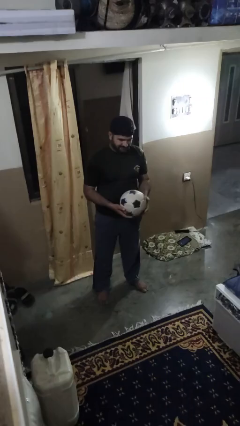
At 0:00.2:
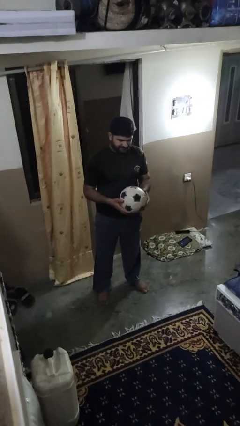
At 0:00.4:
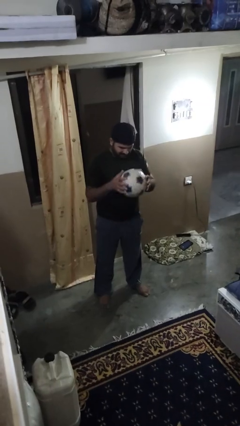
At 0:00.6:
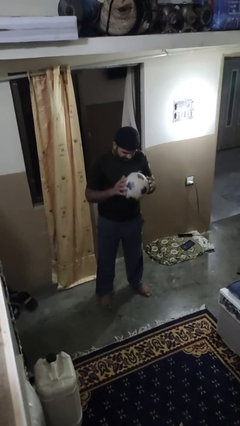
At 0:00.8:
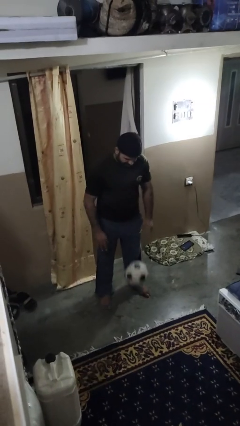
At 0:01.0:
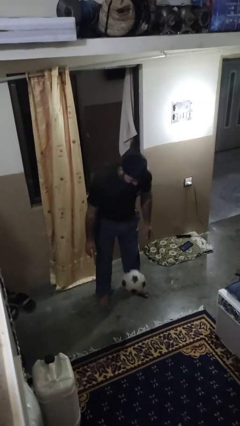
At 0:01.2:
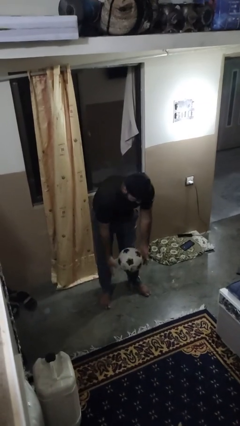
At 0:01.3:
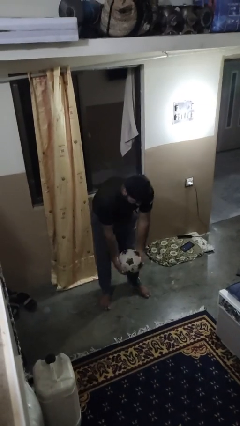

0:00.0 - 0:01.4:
person bounces ball on floor

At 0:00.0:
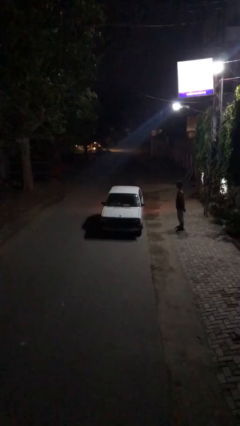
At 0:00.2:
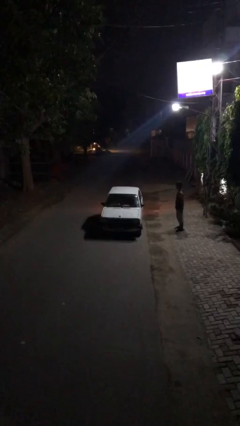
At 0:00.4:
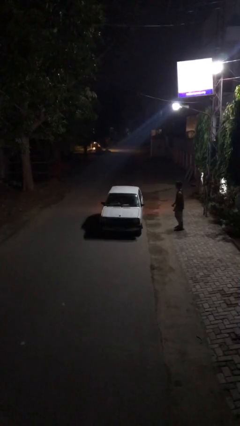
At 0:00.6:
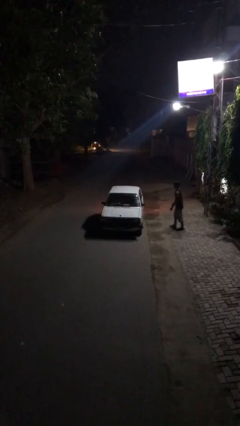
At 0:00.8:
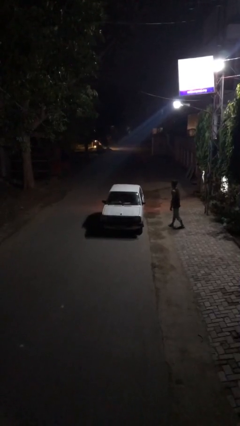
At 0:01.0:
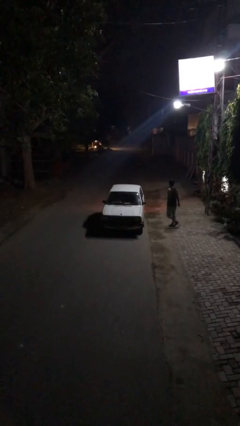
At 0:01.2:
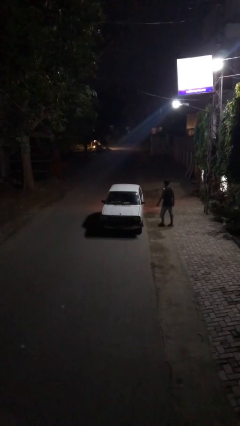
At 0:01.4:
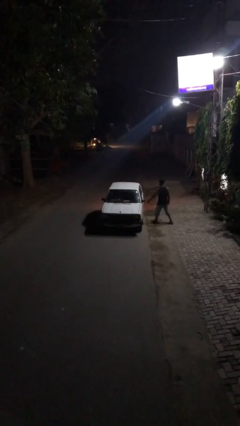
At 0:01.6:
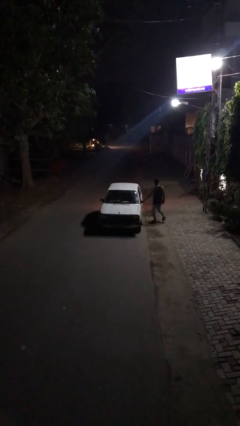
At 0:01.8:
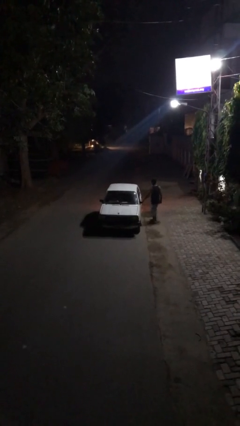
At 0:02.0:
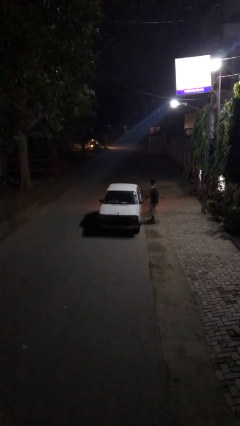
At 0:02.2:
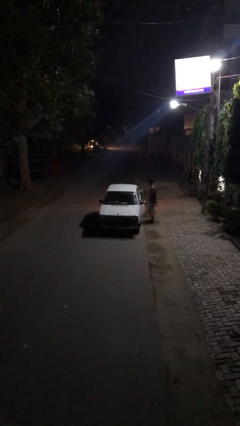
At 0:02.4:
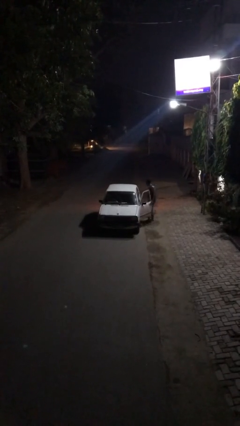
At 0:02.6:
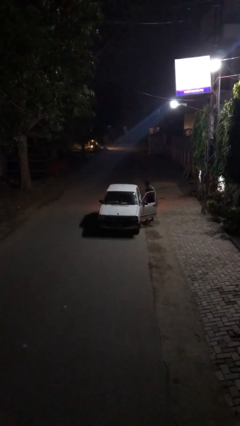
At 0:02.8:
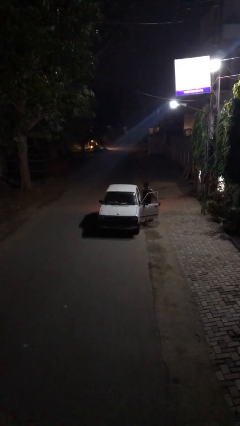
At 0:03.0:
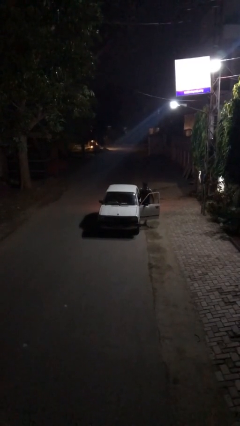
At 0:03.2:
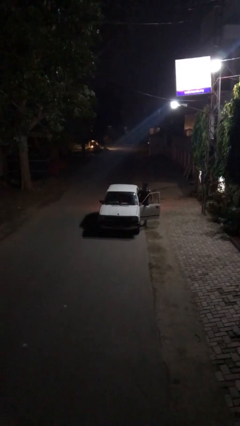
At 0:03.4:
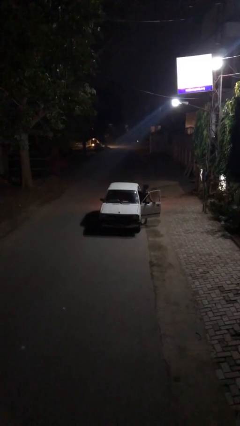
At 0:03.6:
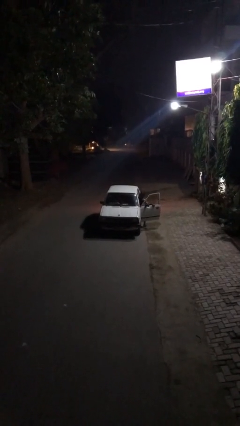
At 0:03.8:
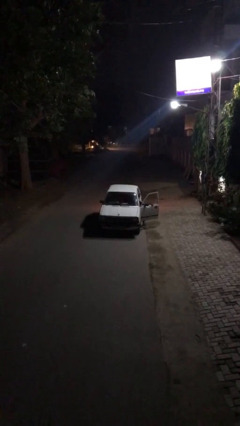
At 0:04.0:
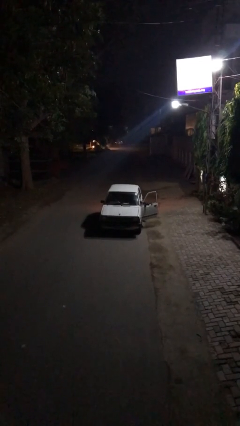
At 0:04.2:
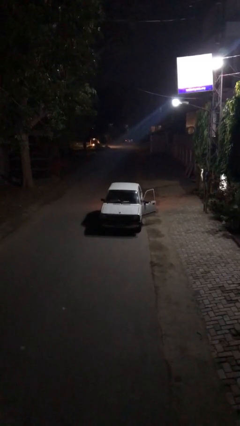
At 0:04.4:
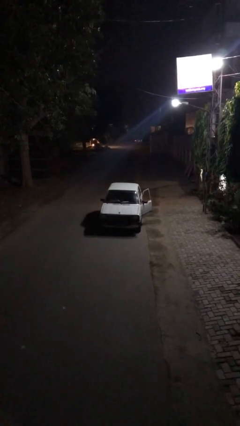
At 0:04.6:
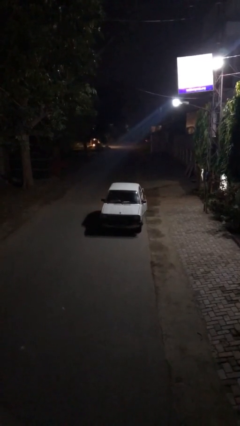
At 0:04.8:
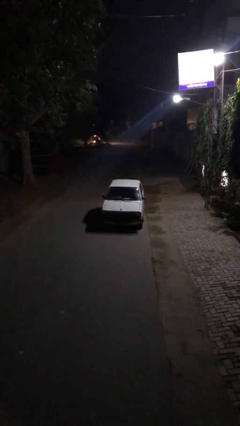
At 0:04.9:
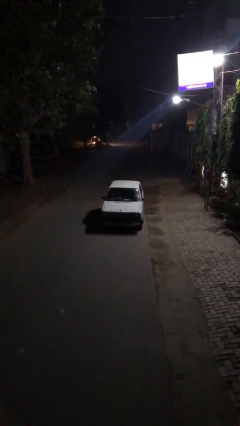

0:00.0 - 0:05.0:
car picks up person

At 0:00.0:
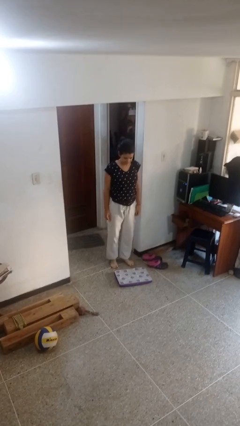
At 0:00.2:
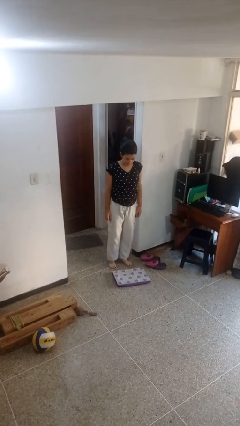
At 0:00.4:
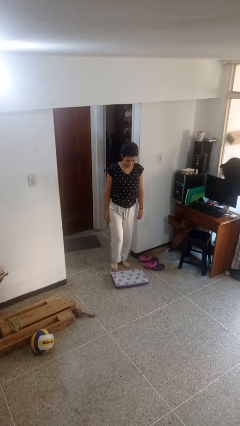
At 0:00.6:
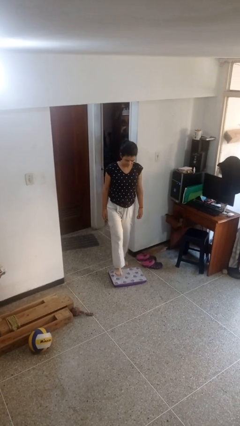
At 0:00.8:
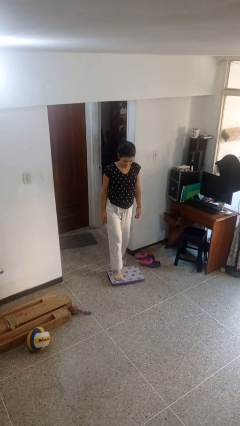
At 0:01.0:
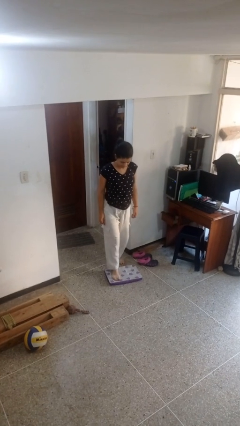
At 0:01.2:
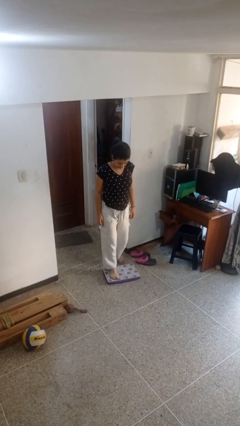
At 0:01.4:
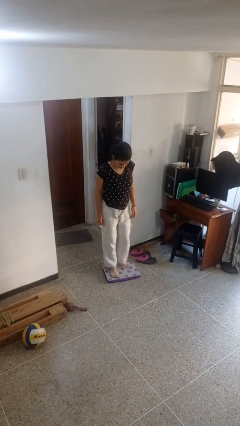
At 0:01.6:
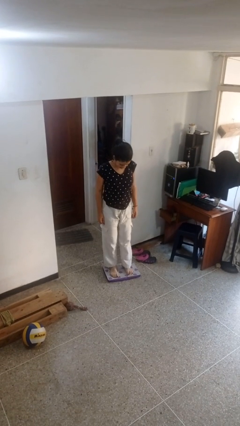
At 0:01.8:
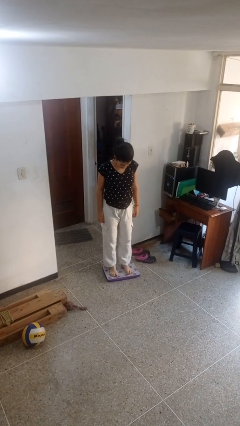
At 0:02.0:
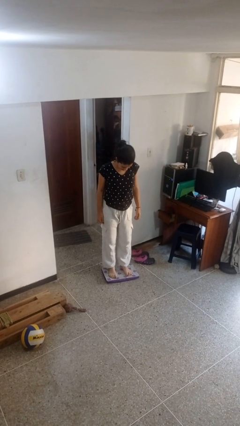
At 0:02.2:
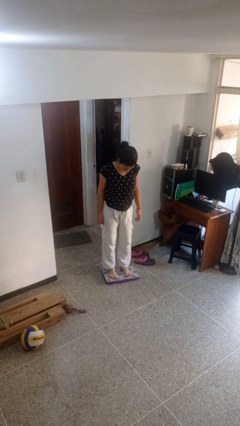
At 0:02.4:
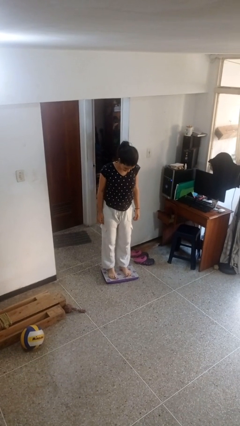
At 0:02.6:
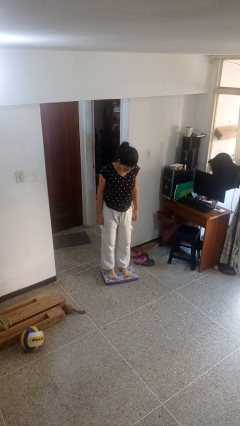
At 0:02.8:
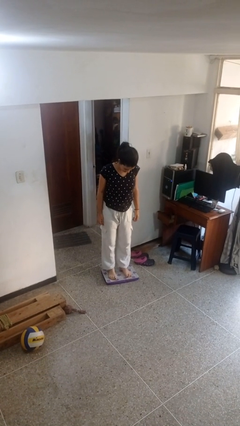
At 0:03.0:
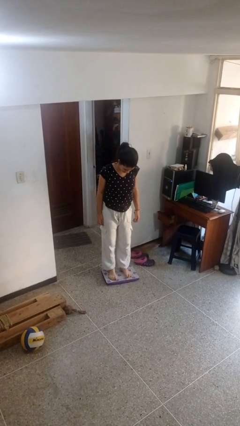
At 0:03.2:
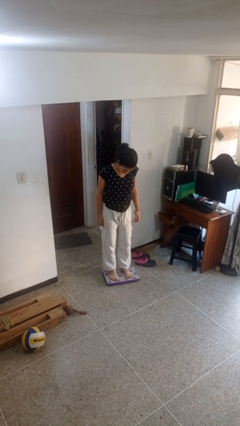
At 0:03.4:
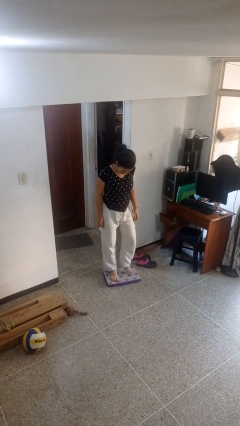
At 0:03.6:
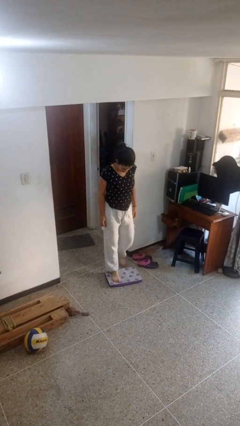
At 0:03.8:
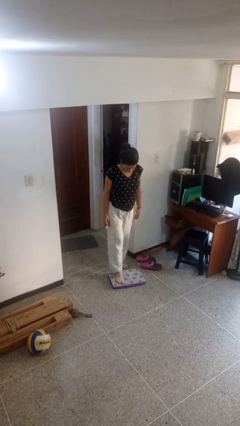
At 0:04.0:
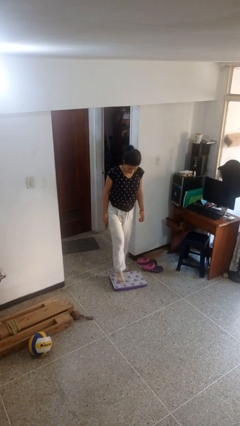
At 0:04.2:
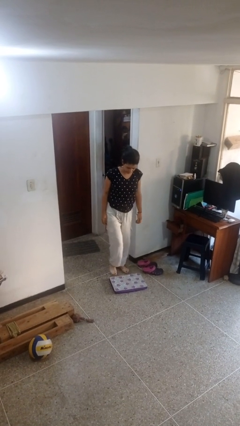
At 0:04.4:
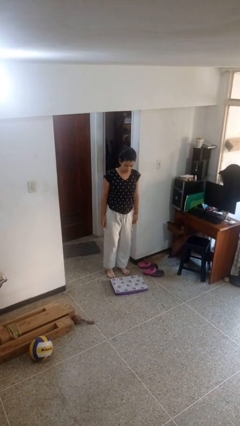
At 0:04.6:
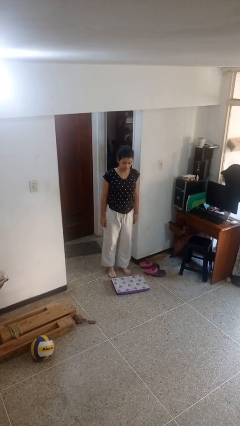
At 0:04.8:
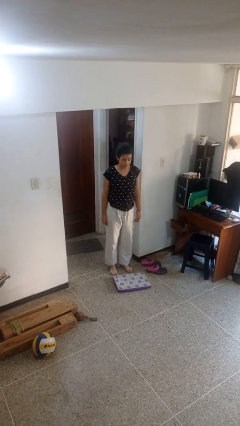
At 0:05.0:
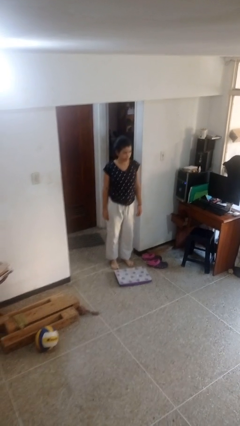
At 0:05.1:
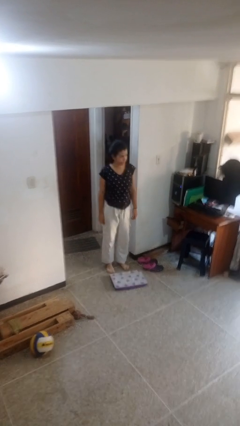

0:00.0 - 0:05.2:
person uses bodyweight scale

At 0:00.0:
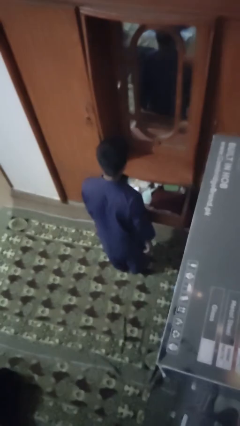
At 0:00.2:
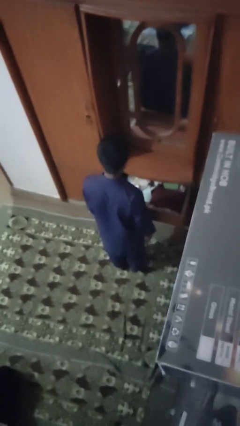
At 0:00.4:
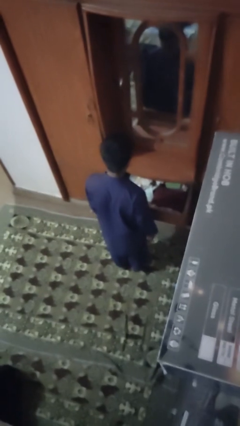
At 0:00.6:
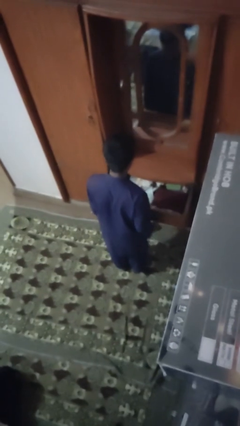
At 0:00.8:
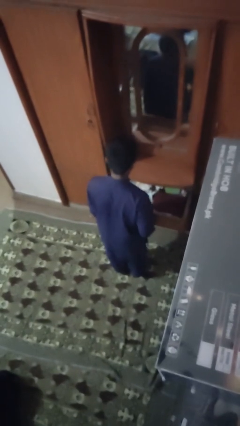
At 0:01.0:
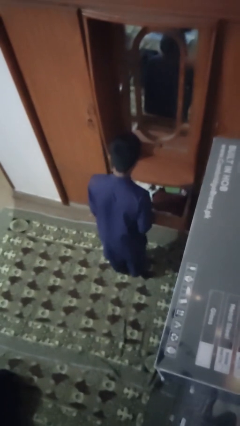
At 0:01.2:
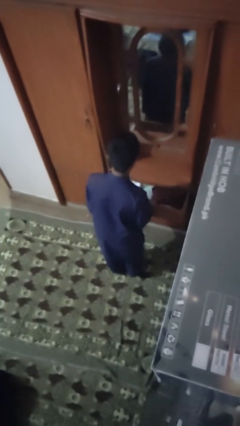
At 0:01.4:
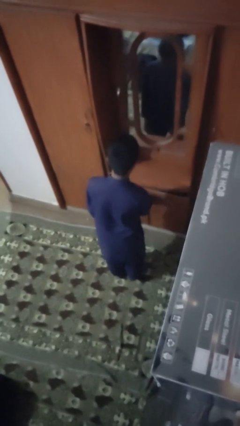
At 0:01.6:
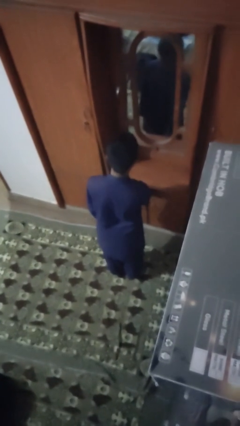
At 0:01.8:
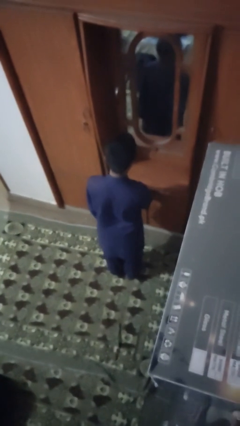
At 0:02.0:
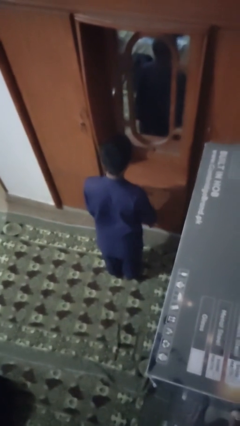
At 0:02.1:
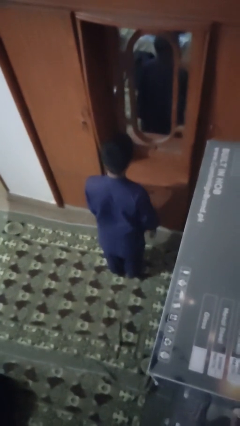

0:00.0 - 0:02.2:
person closes dresser drawer

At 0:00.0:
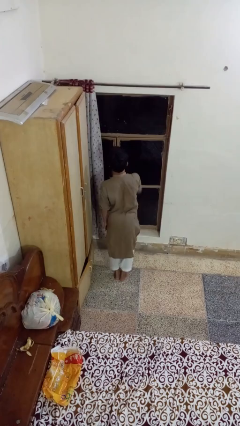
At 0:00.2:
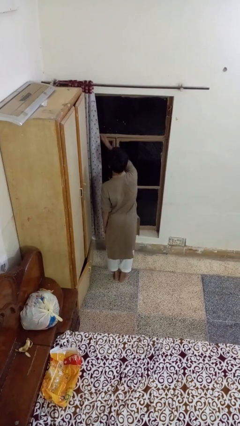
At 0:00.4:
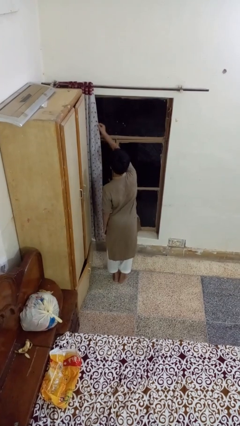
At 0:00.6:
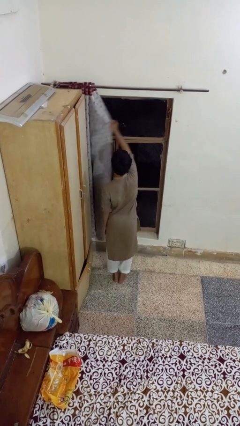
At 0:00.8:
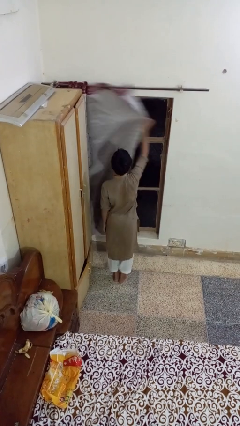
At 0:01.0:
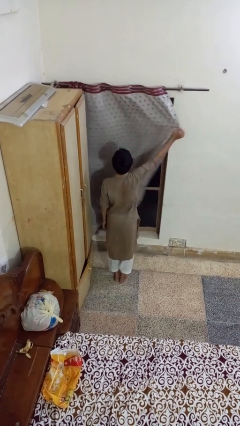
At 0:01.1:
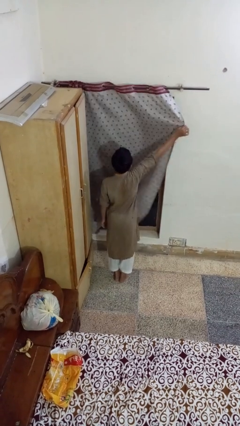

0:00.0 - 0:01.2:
person closes curtains

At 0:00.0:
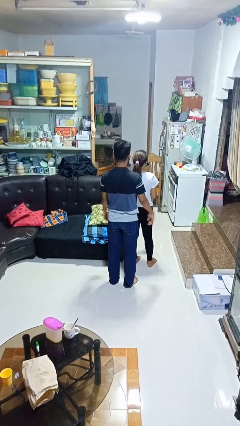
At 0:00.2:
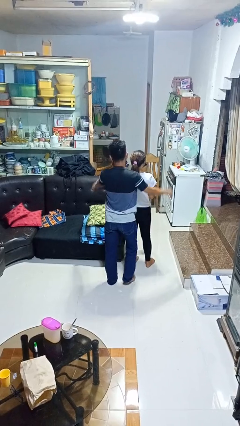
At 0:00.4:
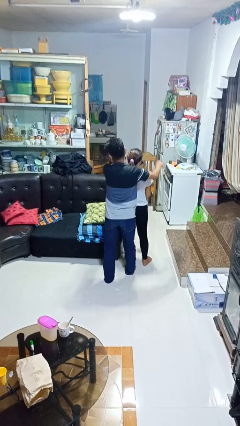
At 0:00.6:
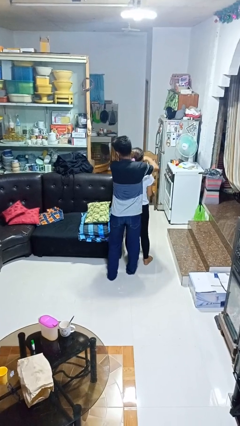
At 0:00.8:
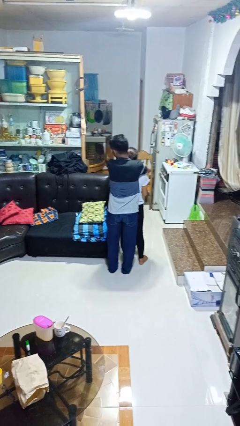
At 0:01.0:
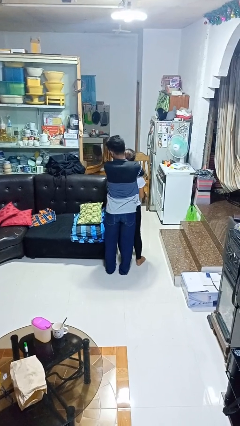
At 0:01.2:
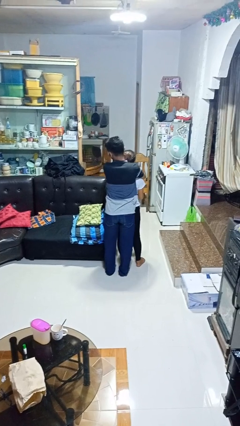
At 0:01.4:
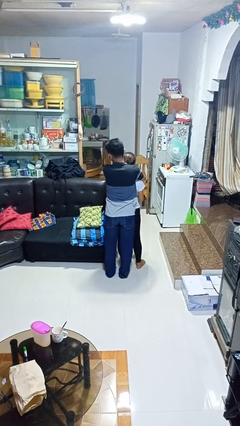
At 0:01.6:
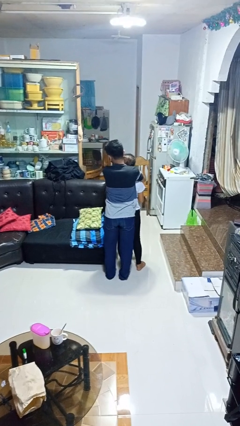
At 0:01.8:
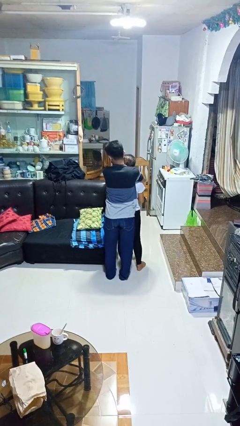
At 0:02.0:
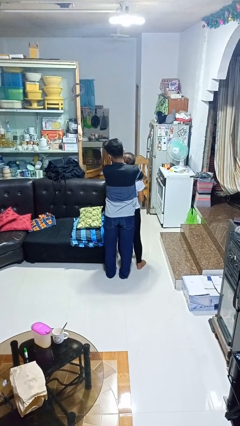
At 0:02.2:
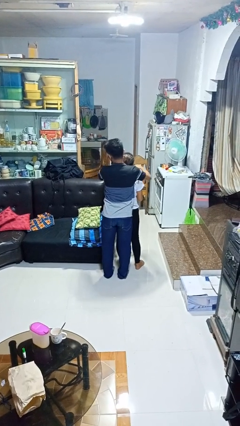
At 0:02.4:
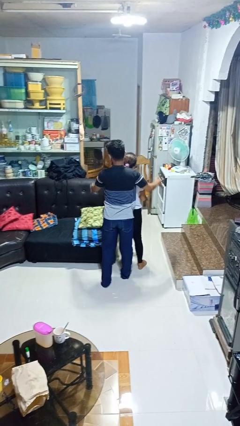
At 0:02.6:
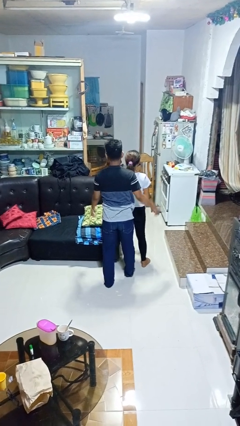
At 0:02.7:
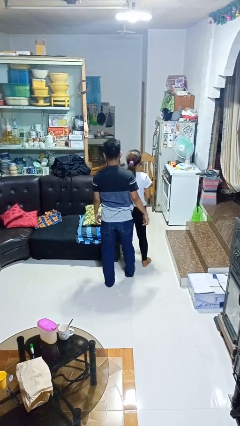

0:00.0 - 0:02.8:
person hugs person from behind
